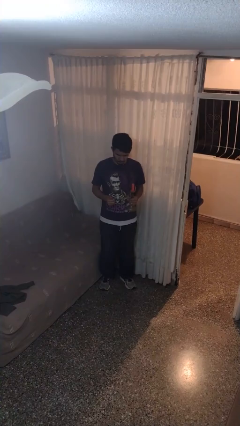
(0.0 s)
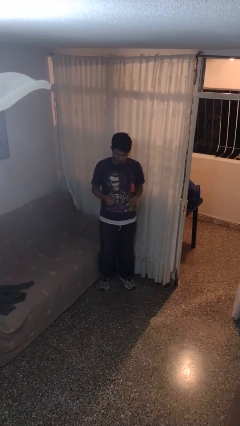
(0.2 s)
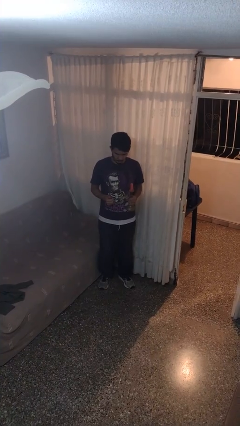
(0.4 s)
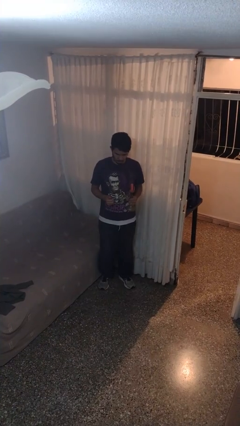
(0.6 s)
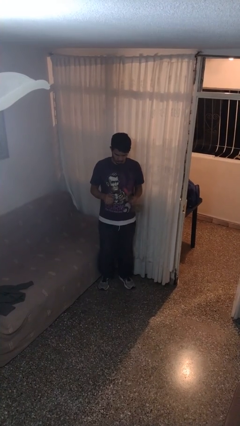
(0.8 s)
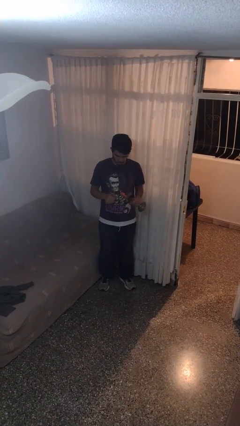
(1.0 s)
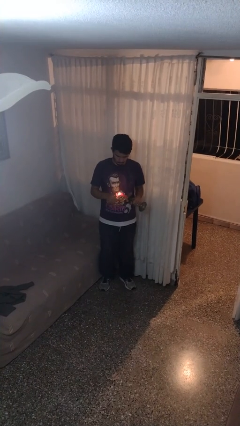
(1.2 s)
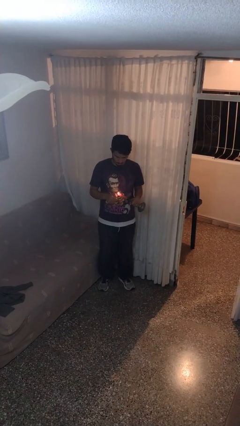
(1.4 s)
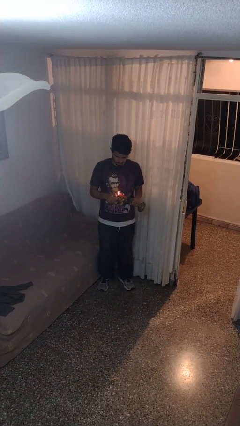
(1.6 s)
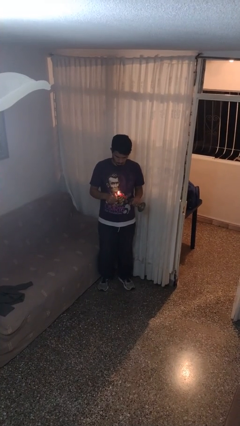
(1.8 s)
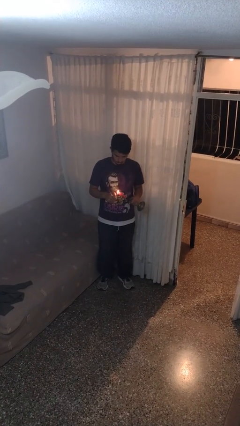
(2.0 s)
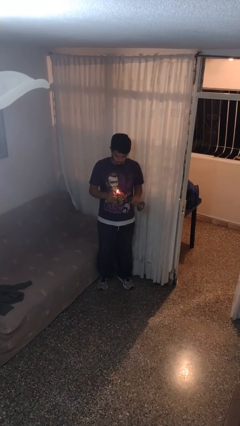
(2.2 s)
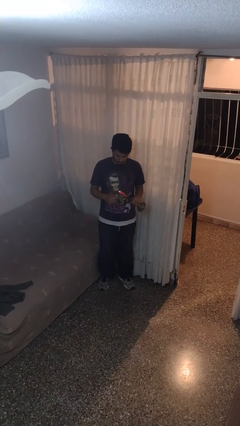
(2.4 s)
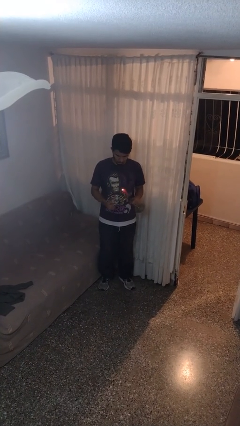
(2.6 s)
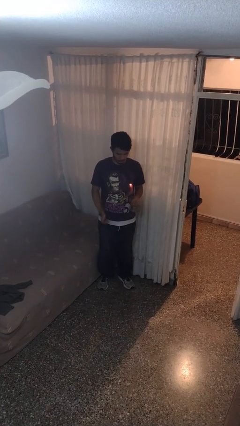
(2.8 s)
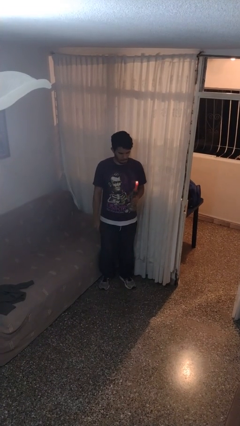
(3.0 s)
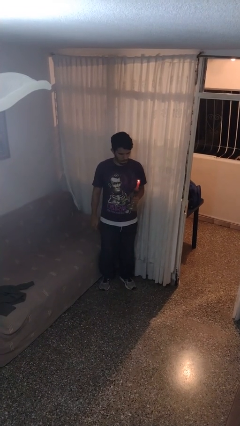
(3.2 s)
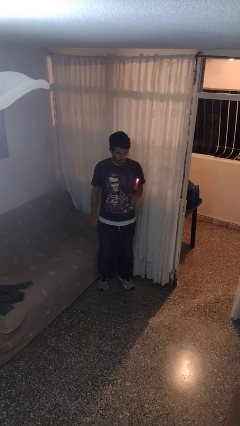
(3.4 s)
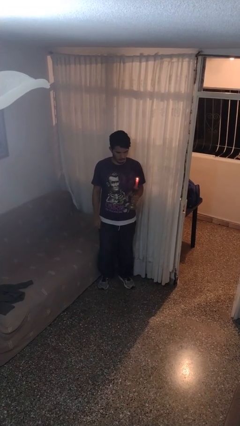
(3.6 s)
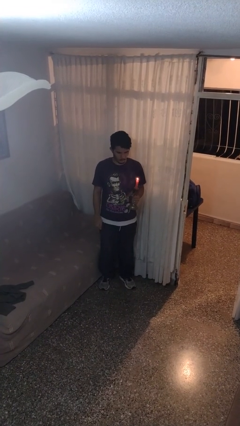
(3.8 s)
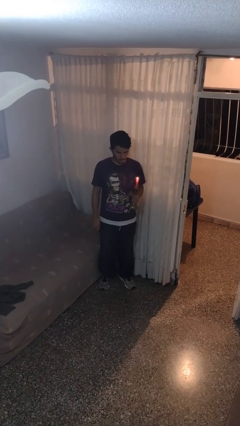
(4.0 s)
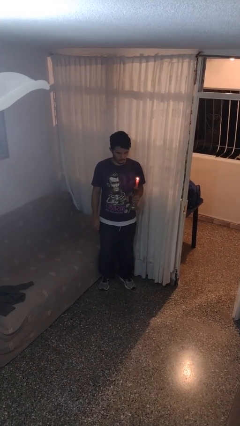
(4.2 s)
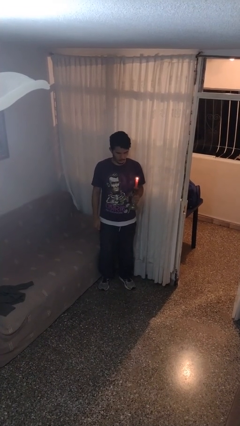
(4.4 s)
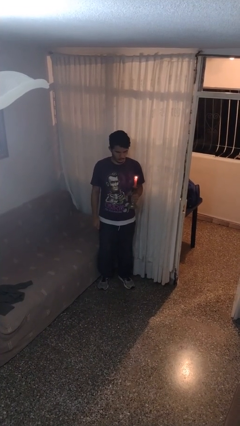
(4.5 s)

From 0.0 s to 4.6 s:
person lights candle

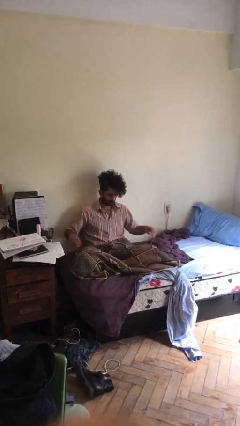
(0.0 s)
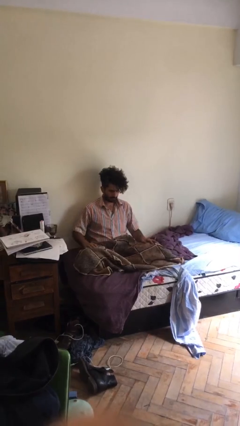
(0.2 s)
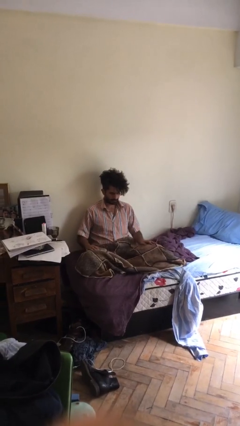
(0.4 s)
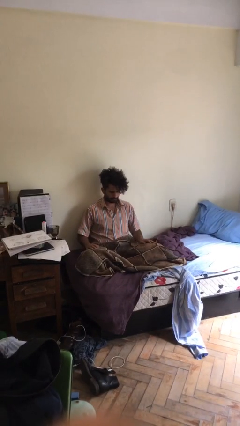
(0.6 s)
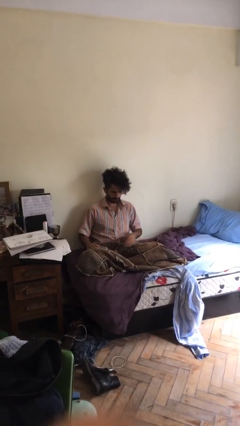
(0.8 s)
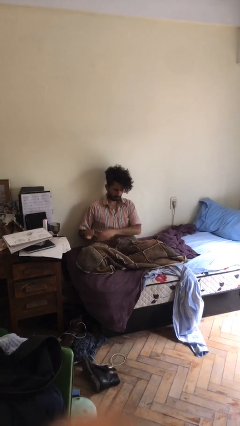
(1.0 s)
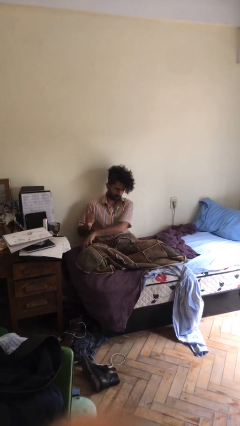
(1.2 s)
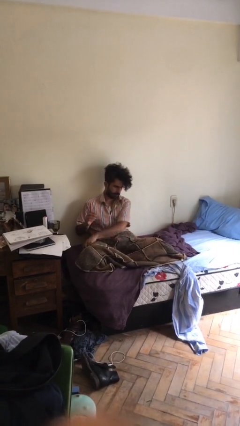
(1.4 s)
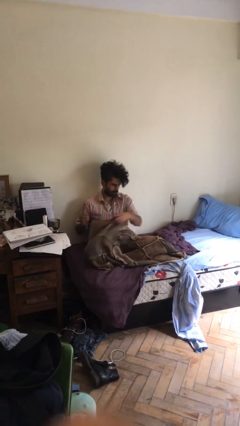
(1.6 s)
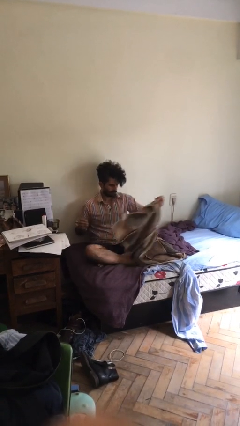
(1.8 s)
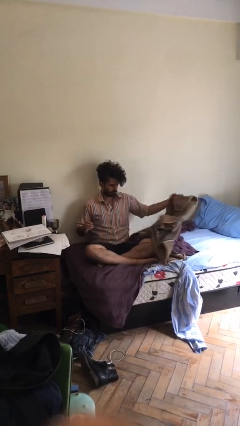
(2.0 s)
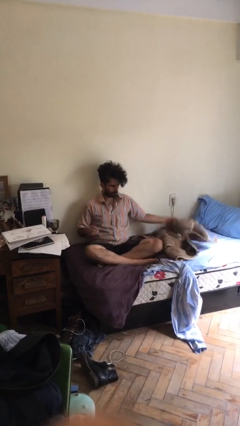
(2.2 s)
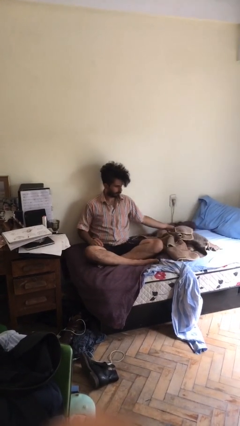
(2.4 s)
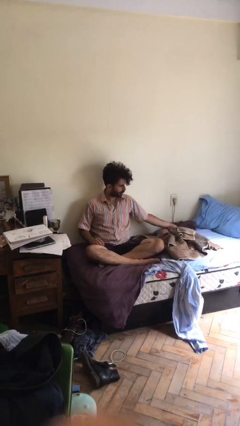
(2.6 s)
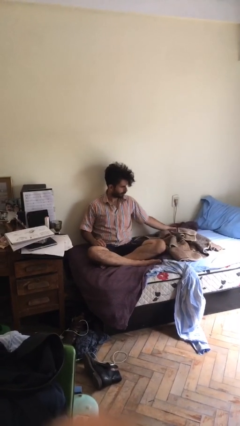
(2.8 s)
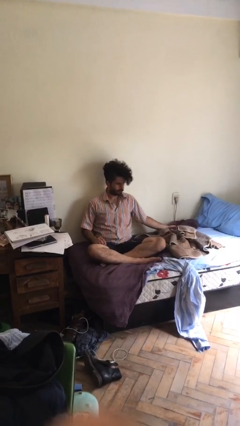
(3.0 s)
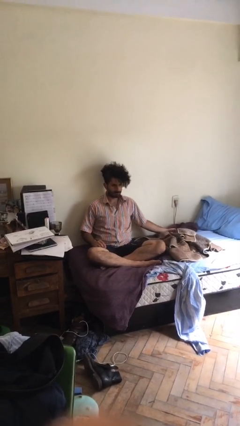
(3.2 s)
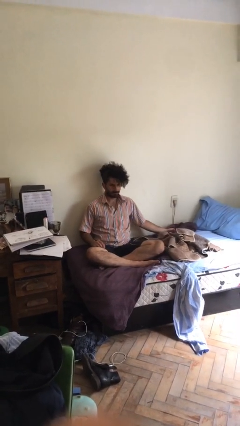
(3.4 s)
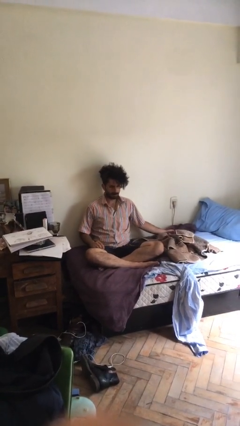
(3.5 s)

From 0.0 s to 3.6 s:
person uncovers with blanket

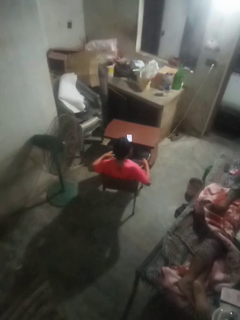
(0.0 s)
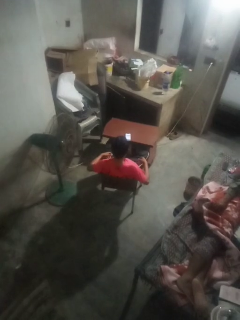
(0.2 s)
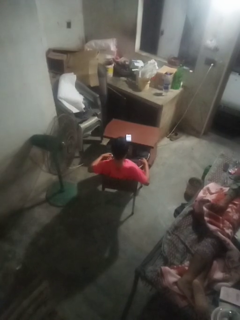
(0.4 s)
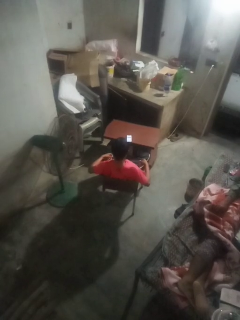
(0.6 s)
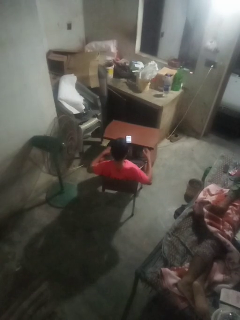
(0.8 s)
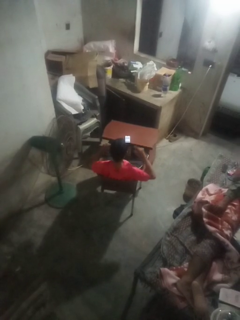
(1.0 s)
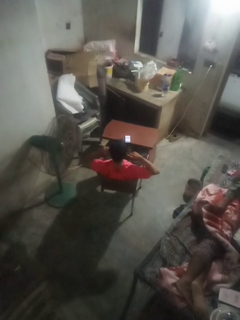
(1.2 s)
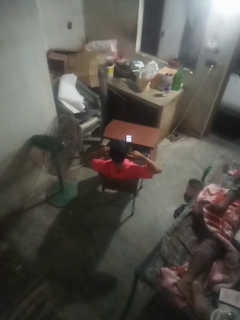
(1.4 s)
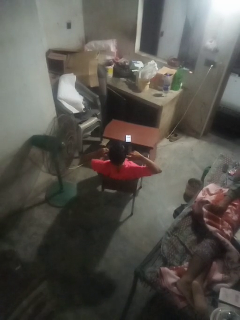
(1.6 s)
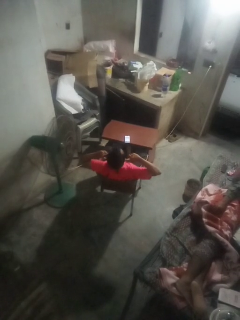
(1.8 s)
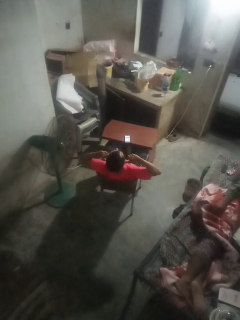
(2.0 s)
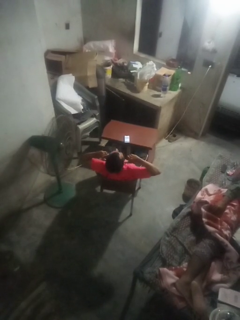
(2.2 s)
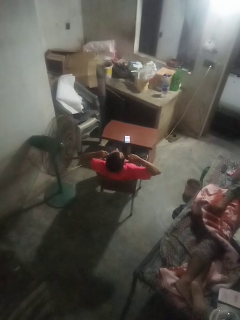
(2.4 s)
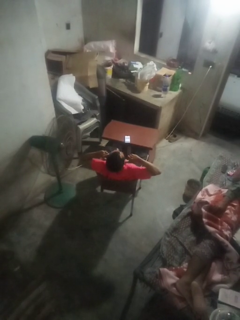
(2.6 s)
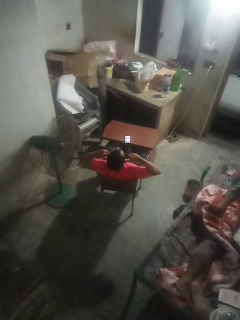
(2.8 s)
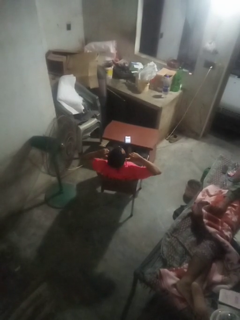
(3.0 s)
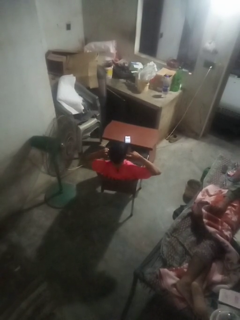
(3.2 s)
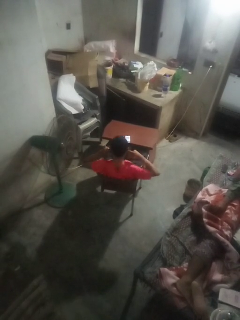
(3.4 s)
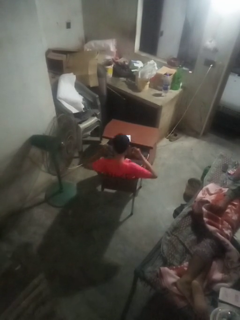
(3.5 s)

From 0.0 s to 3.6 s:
person puts fingers in ear

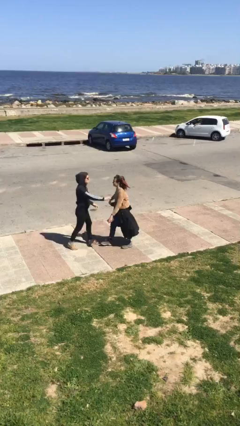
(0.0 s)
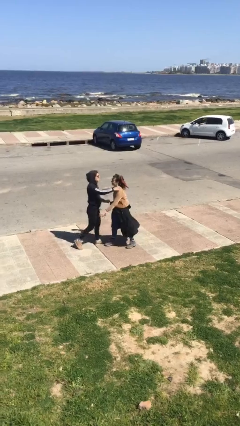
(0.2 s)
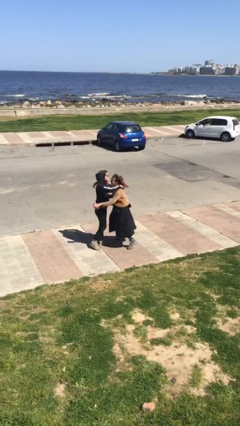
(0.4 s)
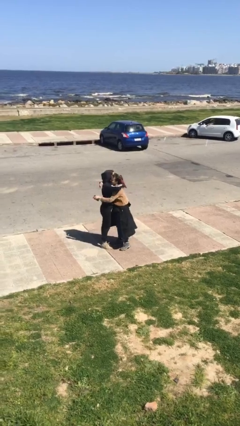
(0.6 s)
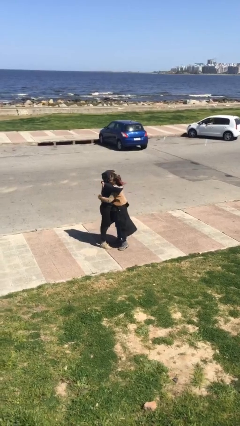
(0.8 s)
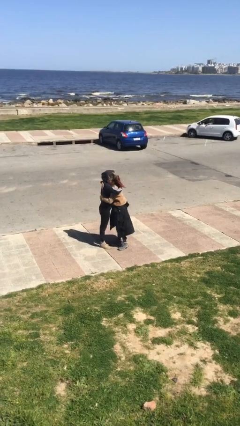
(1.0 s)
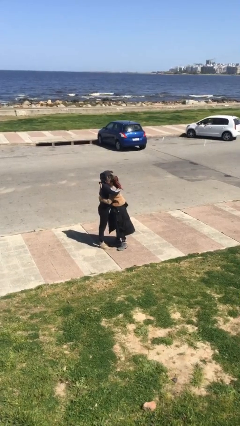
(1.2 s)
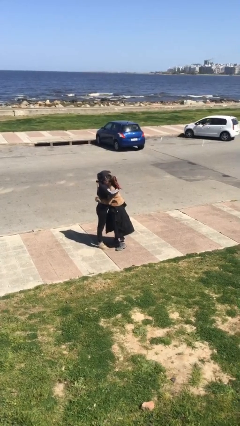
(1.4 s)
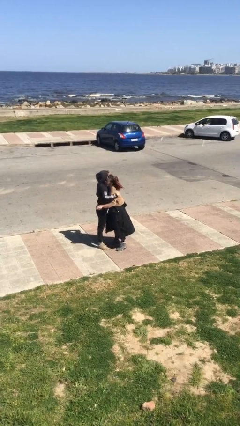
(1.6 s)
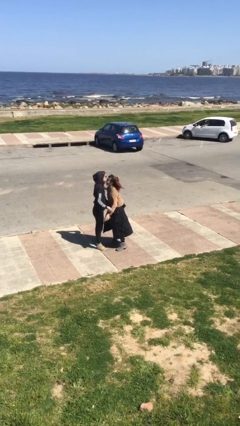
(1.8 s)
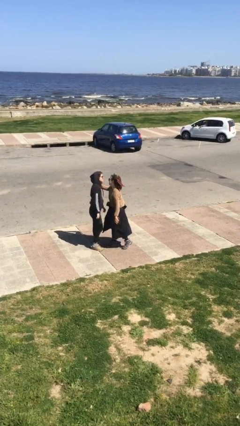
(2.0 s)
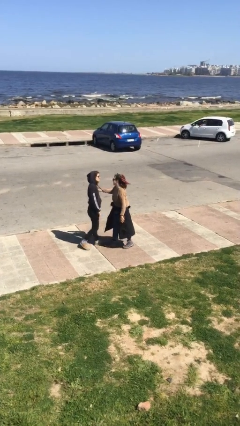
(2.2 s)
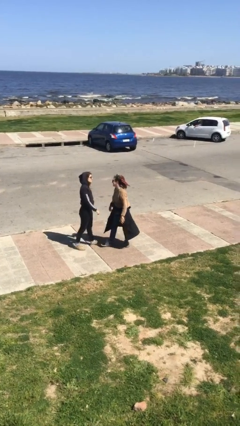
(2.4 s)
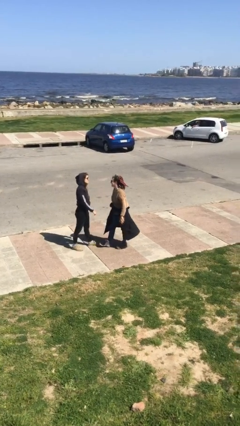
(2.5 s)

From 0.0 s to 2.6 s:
person embraces person

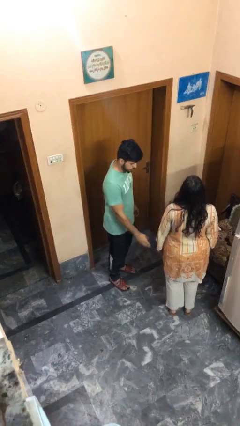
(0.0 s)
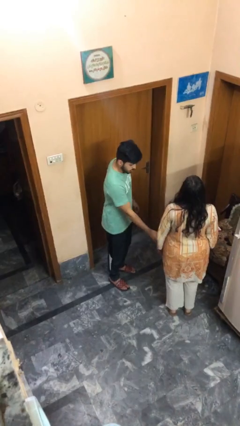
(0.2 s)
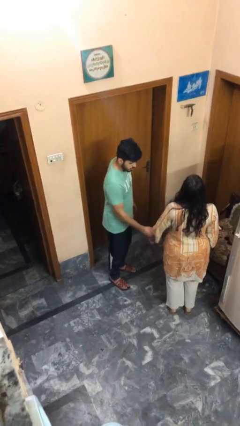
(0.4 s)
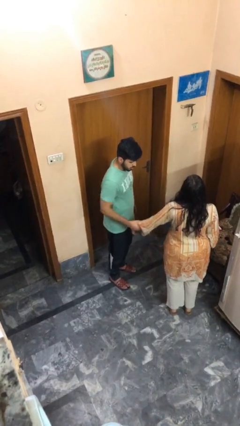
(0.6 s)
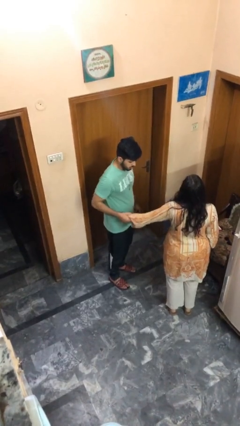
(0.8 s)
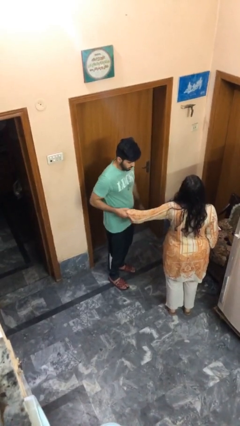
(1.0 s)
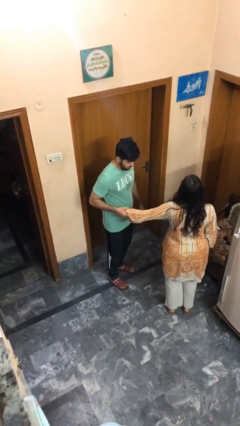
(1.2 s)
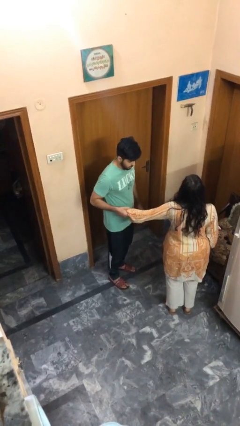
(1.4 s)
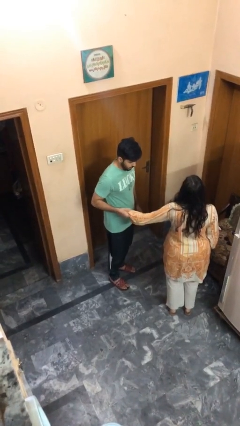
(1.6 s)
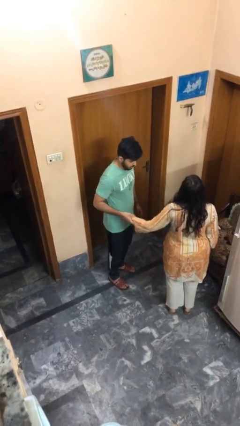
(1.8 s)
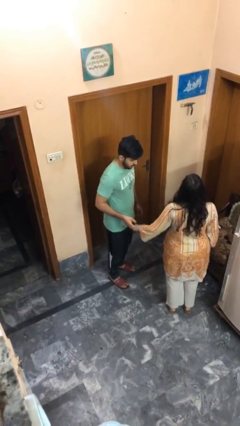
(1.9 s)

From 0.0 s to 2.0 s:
person grabs person by forearm

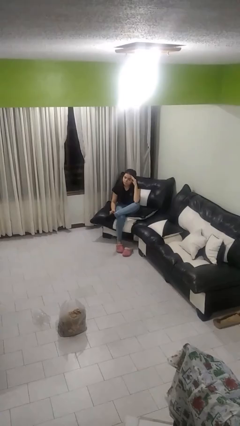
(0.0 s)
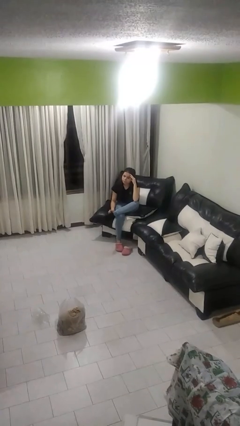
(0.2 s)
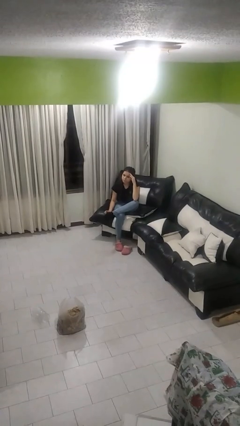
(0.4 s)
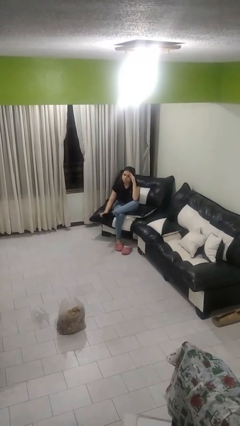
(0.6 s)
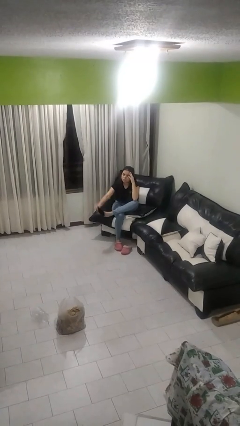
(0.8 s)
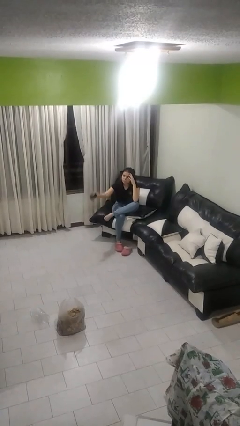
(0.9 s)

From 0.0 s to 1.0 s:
person takes off socks

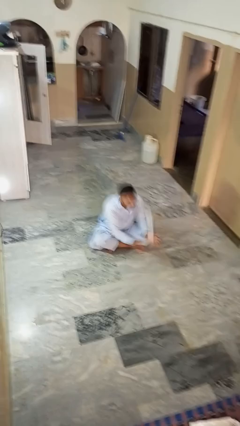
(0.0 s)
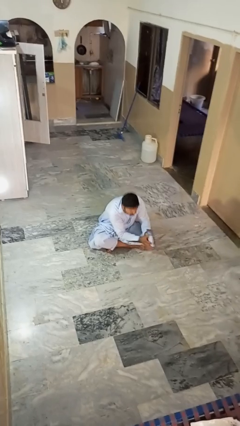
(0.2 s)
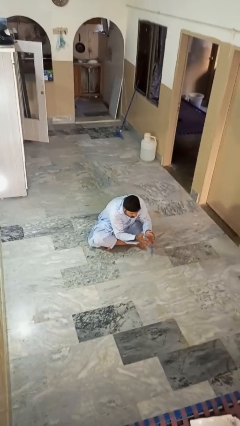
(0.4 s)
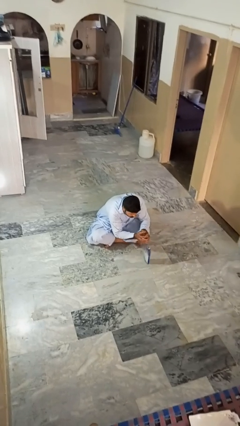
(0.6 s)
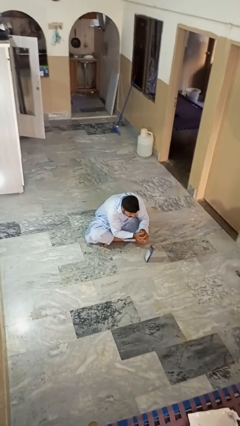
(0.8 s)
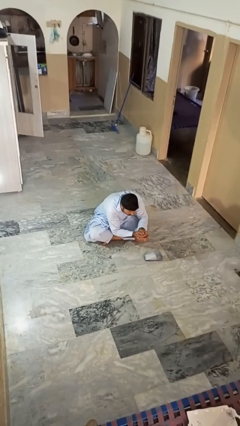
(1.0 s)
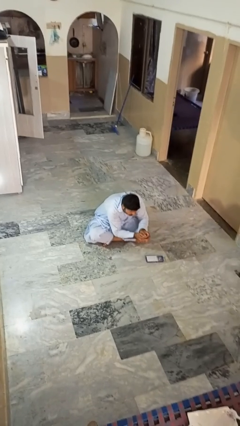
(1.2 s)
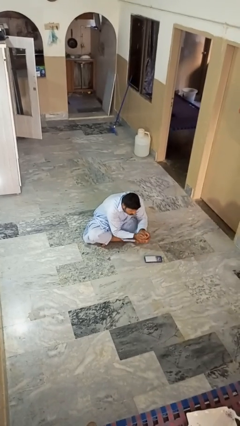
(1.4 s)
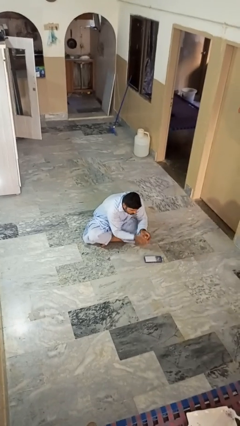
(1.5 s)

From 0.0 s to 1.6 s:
person catches dropped object
